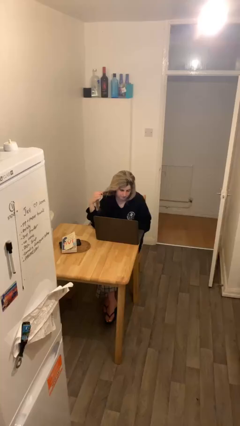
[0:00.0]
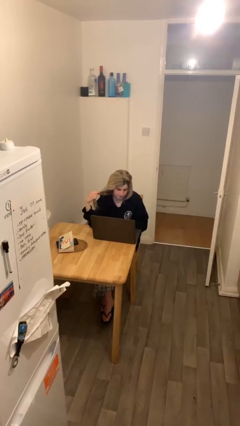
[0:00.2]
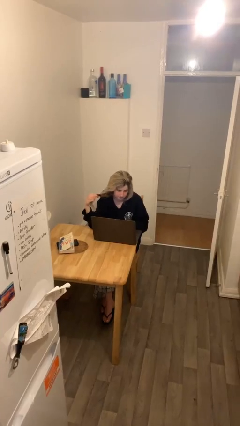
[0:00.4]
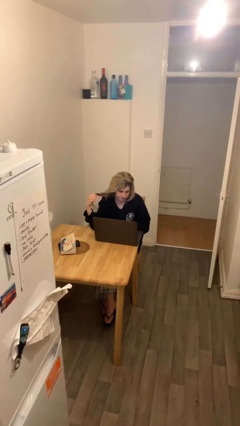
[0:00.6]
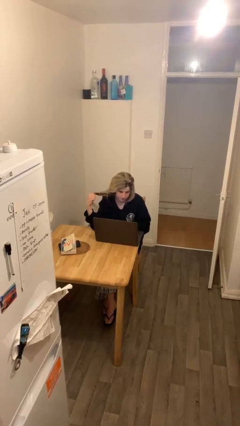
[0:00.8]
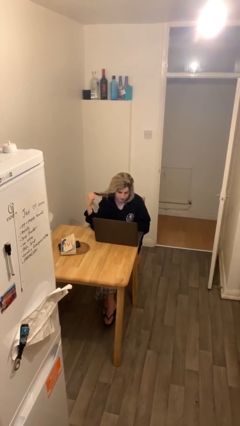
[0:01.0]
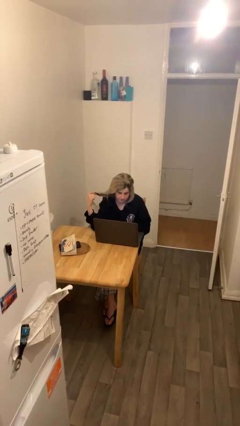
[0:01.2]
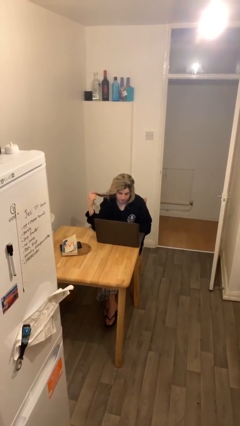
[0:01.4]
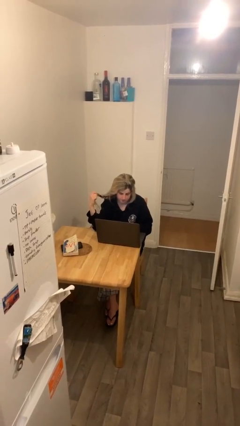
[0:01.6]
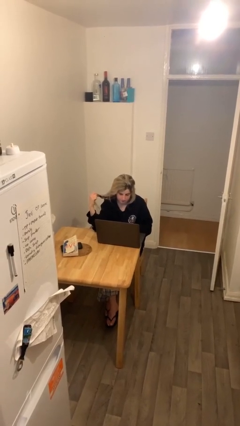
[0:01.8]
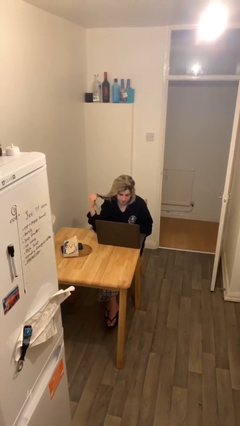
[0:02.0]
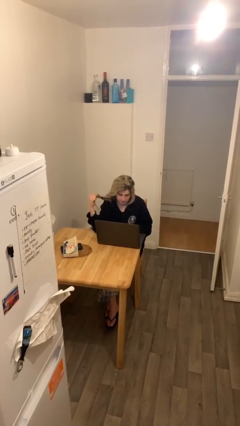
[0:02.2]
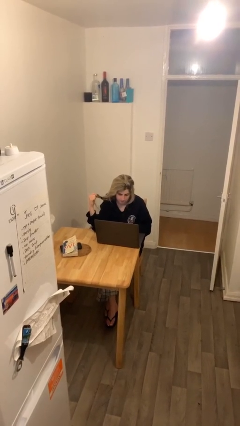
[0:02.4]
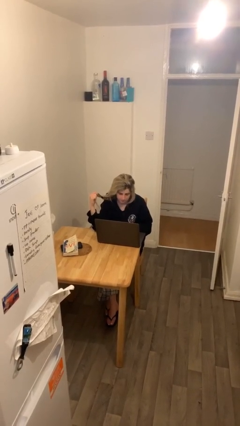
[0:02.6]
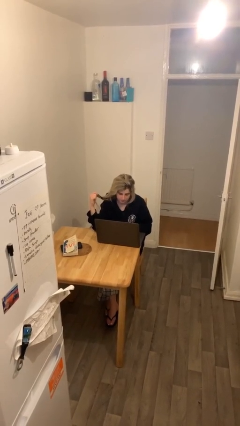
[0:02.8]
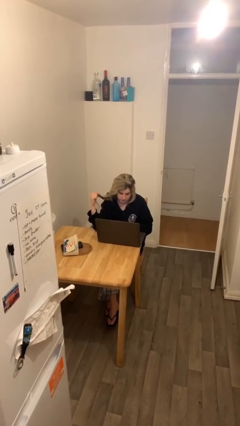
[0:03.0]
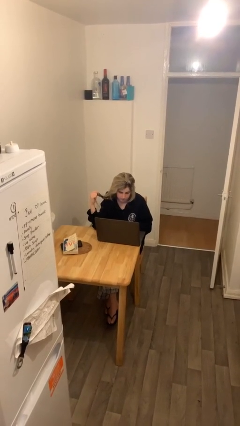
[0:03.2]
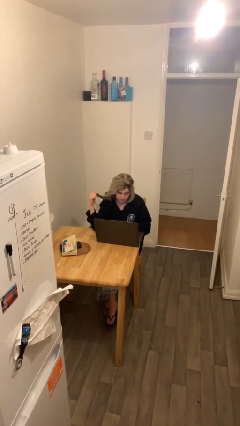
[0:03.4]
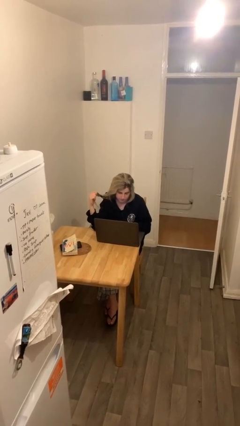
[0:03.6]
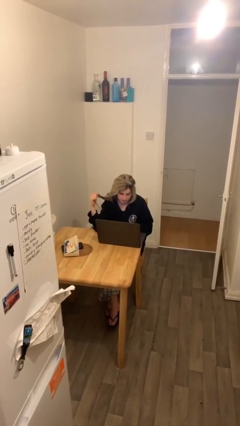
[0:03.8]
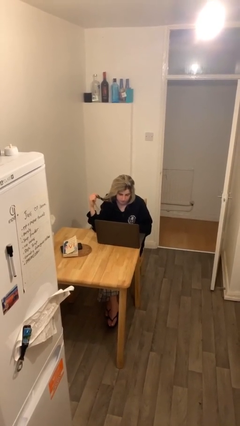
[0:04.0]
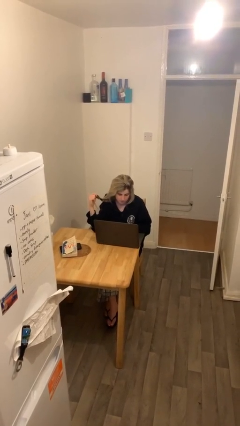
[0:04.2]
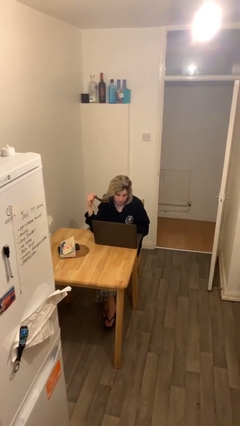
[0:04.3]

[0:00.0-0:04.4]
person interacts with laptop

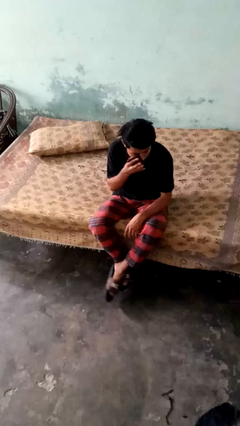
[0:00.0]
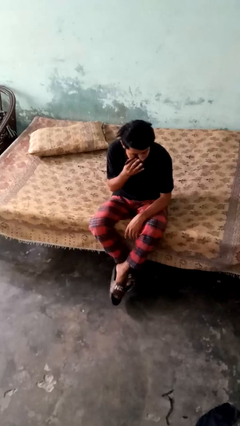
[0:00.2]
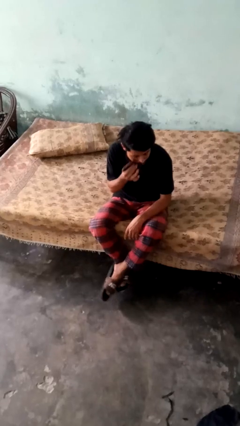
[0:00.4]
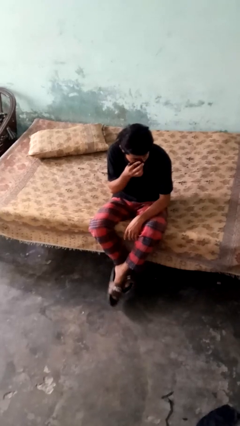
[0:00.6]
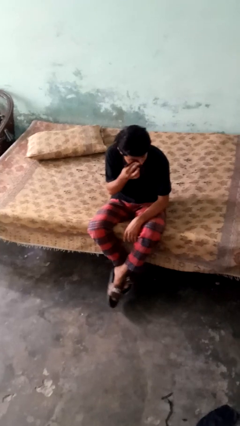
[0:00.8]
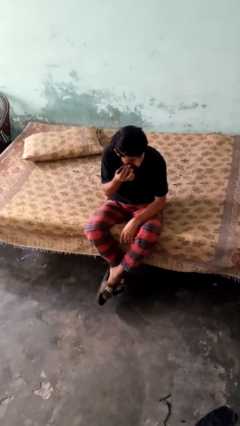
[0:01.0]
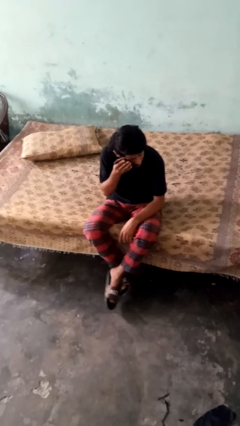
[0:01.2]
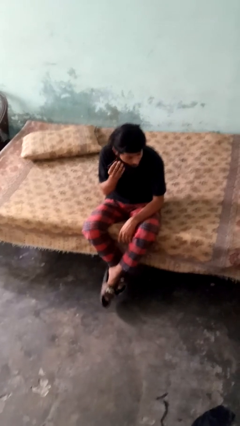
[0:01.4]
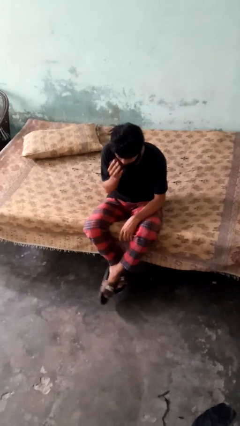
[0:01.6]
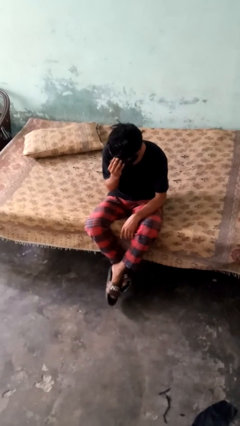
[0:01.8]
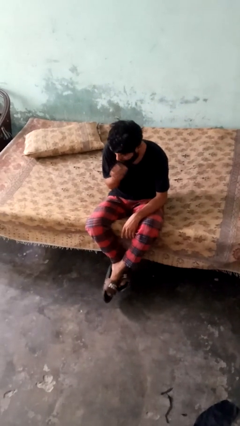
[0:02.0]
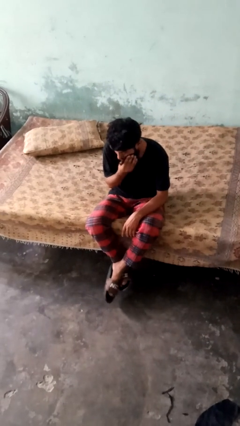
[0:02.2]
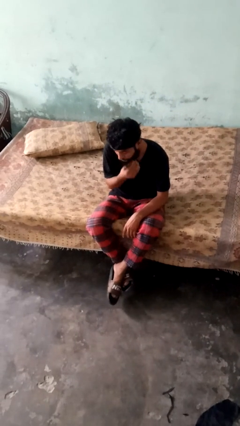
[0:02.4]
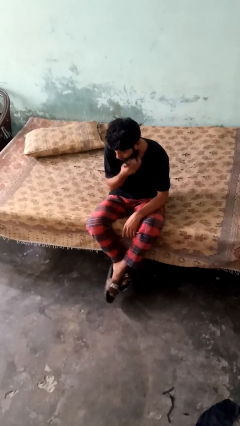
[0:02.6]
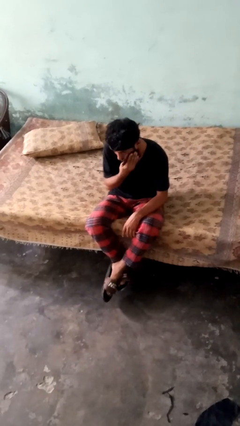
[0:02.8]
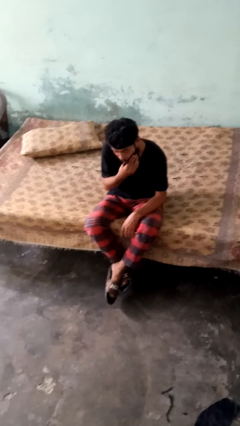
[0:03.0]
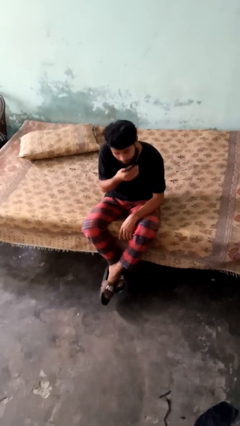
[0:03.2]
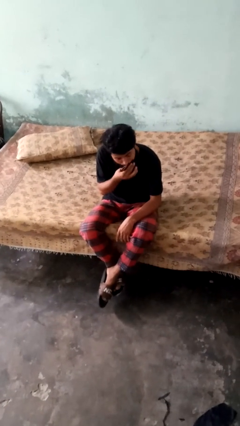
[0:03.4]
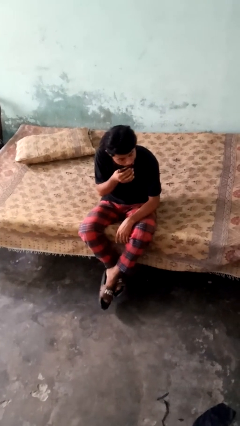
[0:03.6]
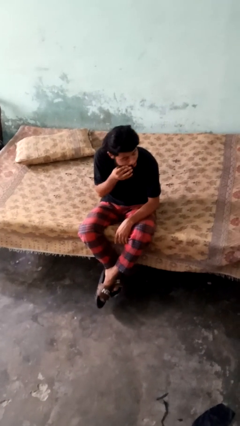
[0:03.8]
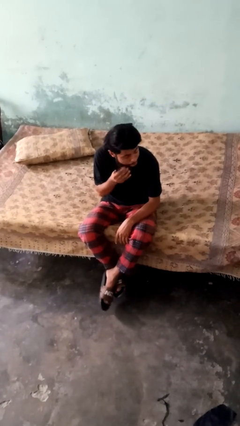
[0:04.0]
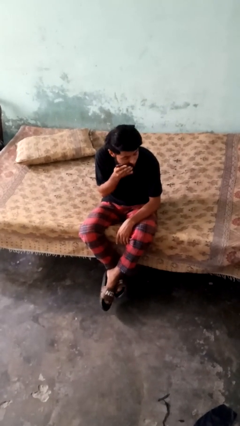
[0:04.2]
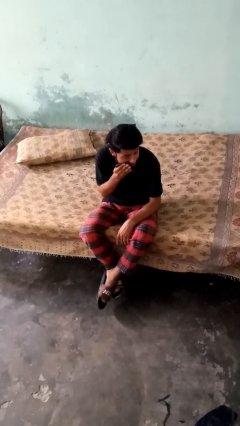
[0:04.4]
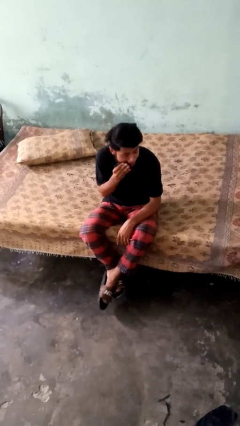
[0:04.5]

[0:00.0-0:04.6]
person wipes mouth with napkin

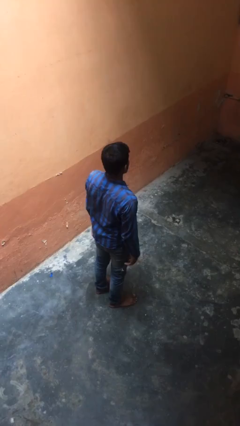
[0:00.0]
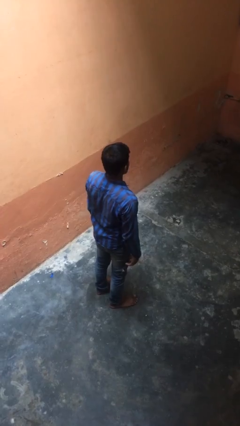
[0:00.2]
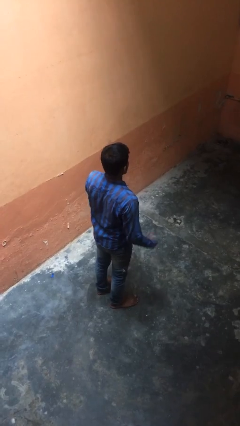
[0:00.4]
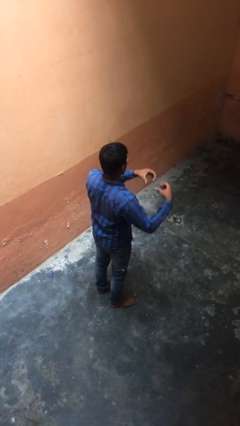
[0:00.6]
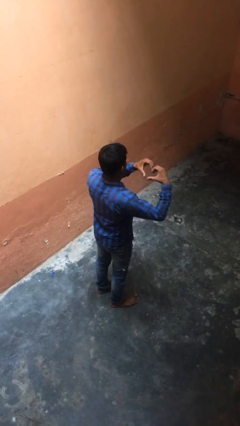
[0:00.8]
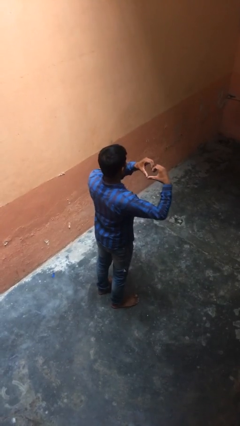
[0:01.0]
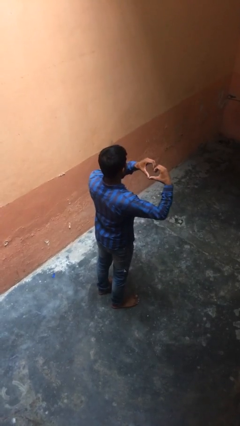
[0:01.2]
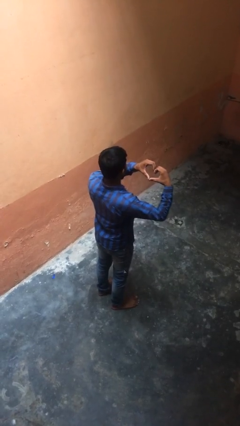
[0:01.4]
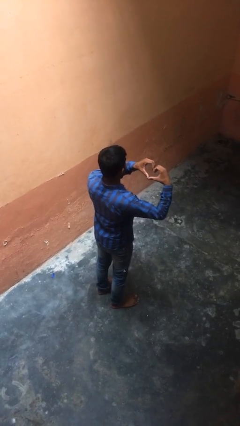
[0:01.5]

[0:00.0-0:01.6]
person gestures heart

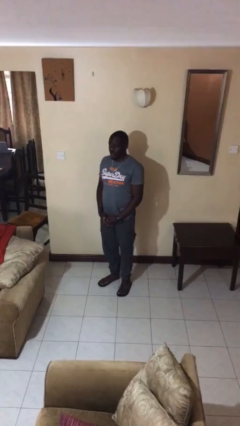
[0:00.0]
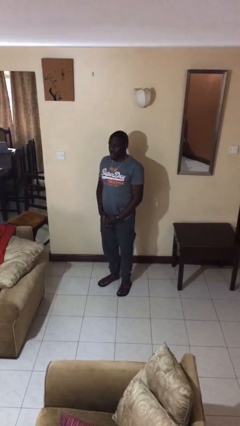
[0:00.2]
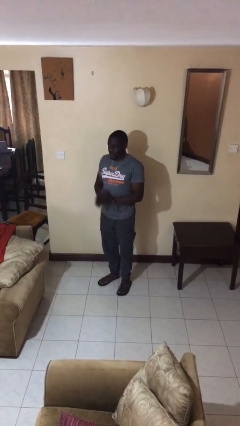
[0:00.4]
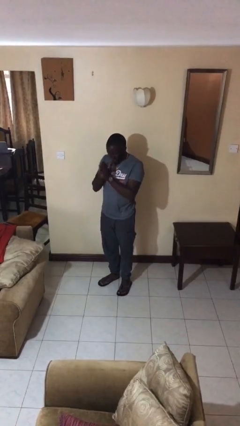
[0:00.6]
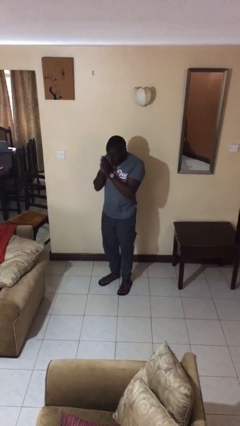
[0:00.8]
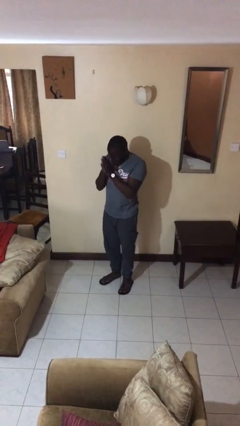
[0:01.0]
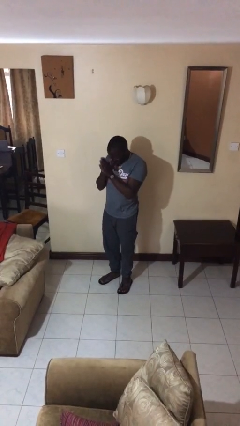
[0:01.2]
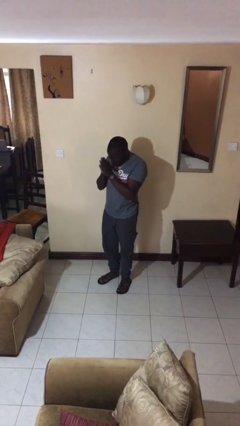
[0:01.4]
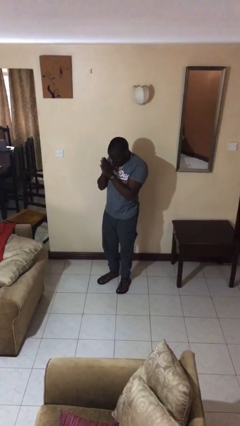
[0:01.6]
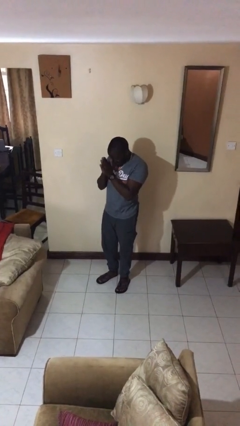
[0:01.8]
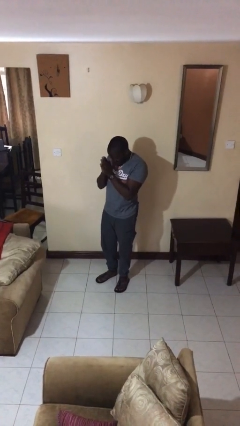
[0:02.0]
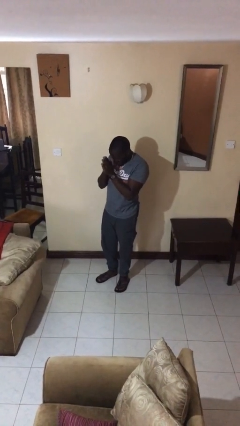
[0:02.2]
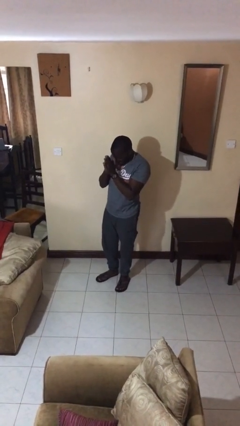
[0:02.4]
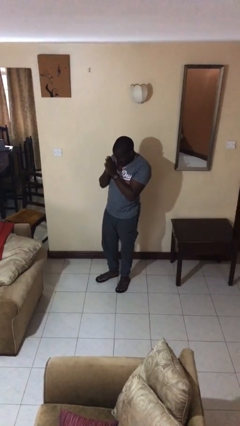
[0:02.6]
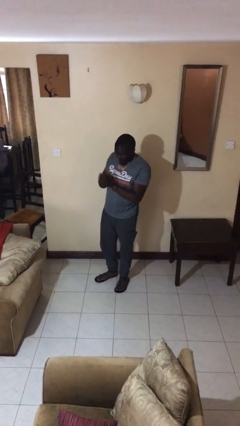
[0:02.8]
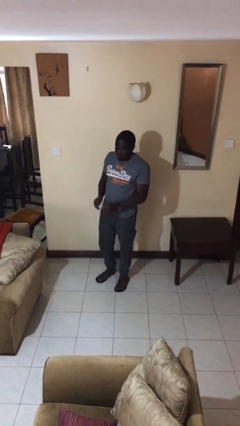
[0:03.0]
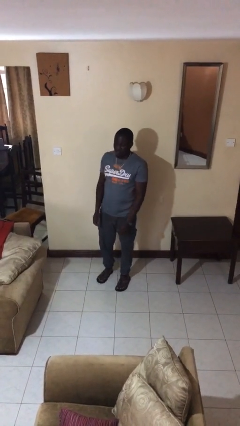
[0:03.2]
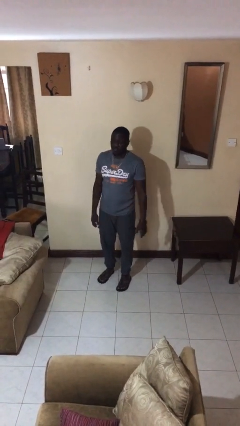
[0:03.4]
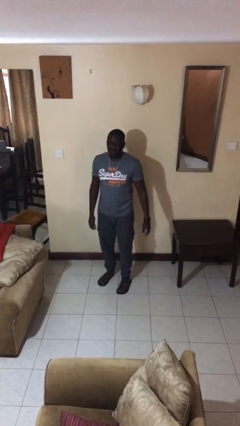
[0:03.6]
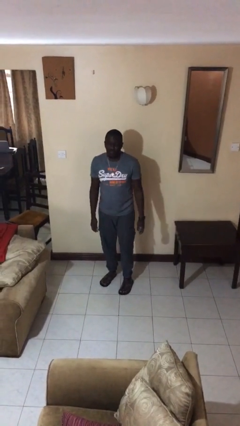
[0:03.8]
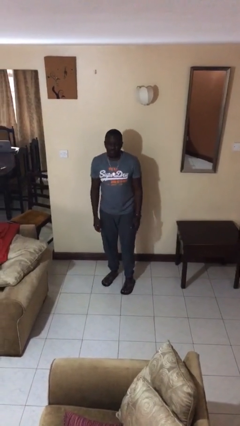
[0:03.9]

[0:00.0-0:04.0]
person prays

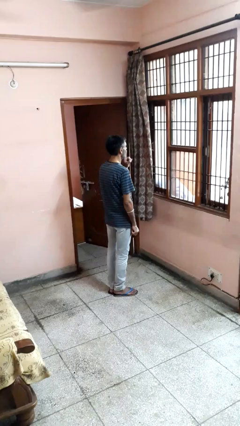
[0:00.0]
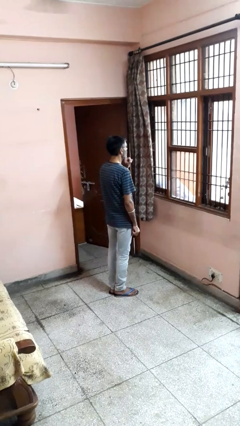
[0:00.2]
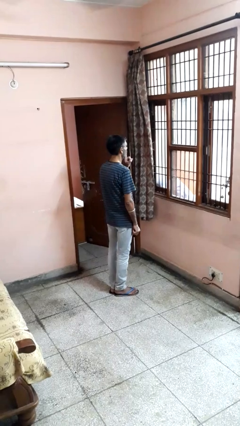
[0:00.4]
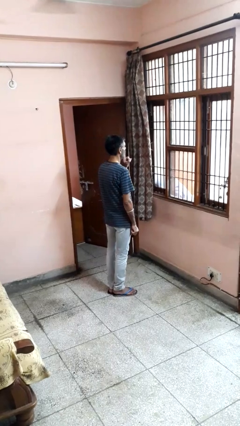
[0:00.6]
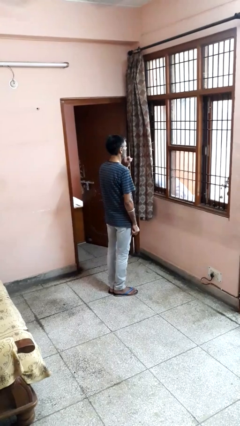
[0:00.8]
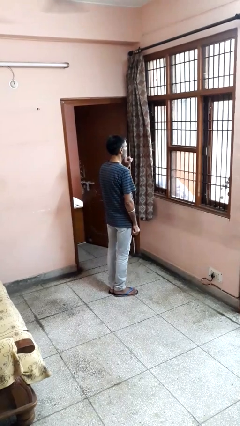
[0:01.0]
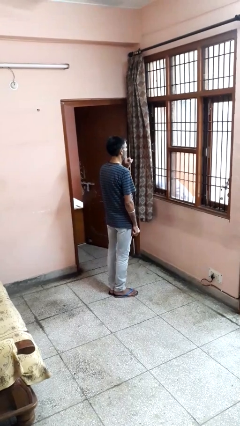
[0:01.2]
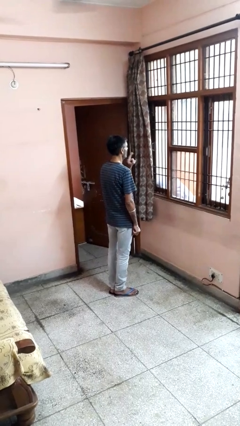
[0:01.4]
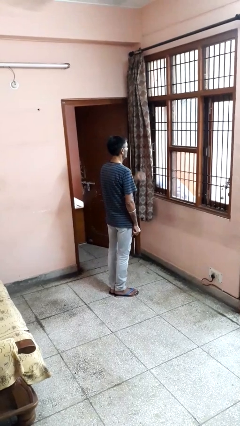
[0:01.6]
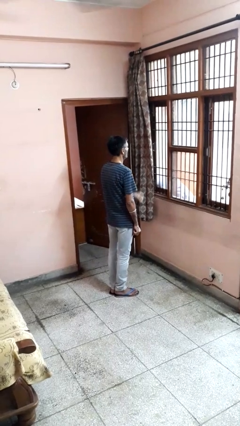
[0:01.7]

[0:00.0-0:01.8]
person gestures be quiet

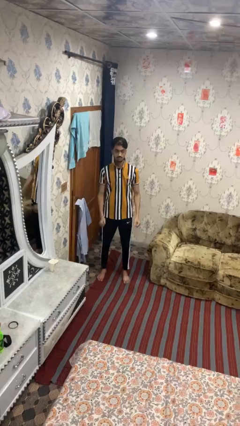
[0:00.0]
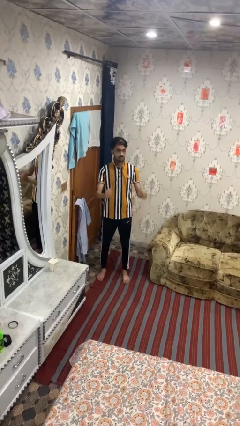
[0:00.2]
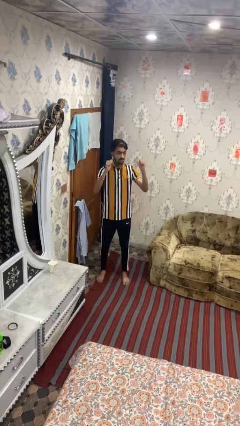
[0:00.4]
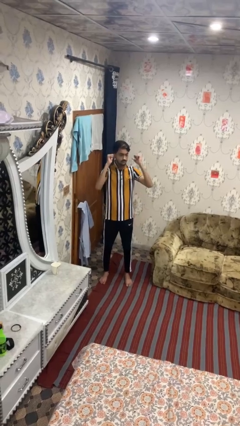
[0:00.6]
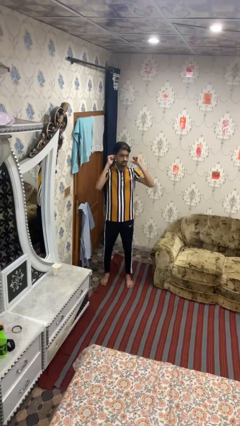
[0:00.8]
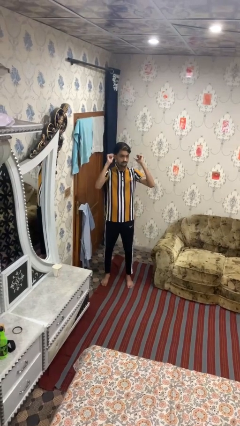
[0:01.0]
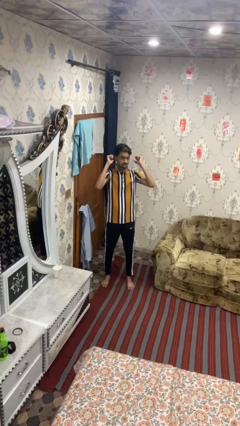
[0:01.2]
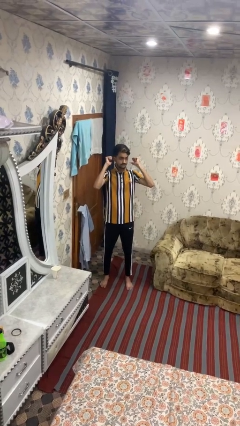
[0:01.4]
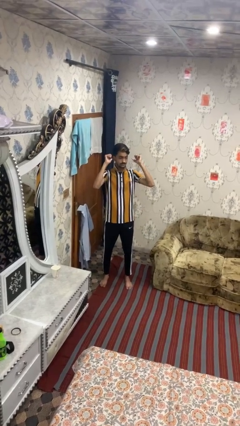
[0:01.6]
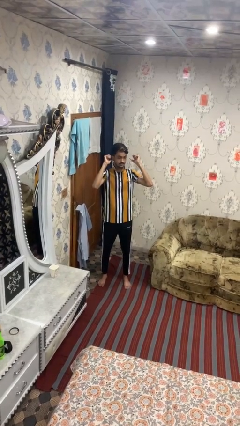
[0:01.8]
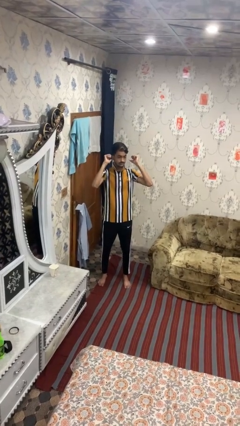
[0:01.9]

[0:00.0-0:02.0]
person gestures behind me
